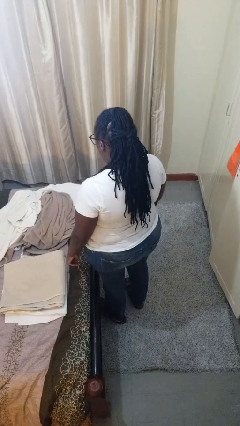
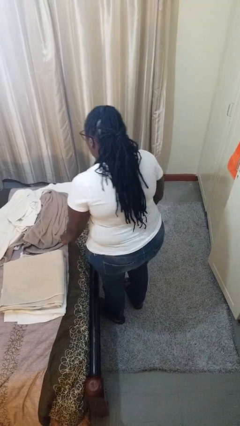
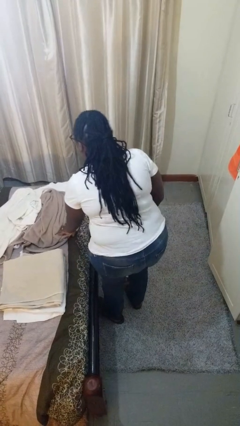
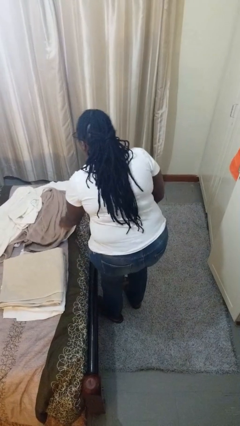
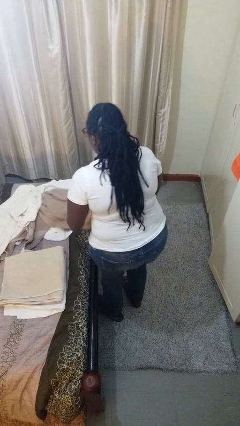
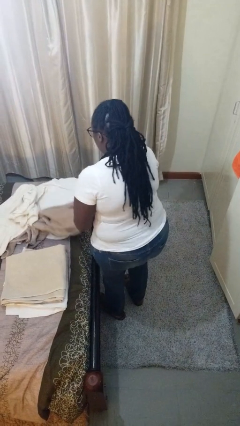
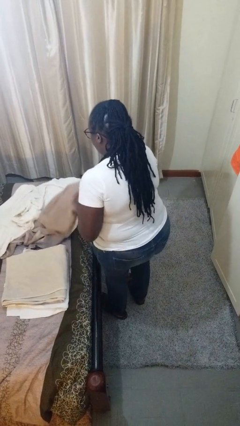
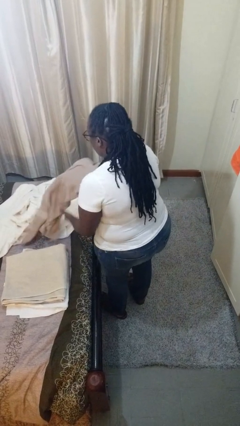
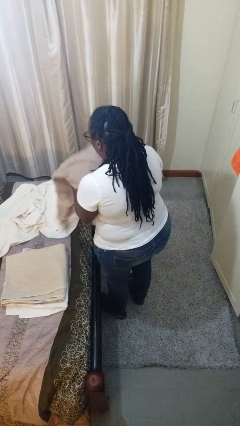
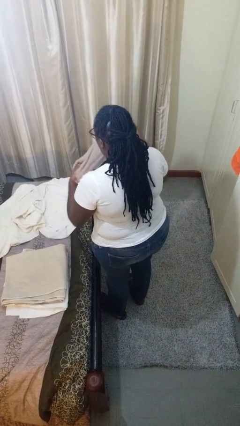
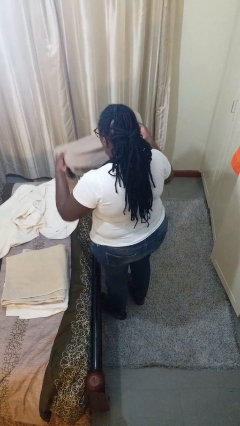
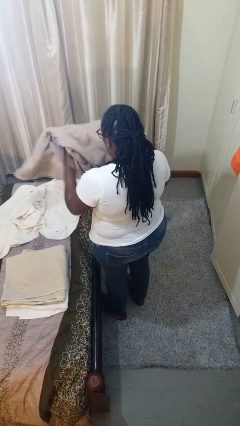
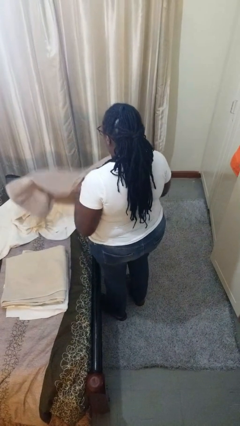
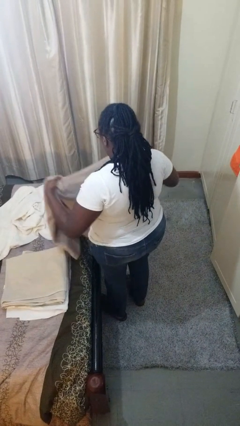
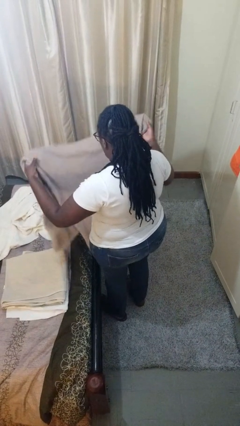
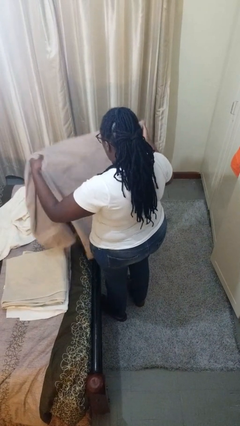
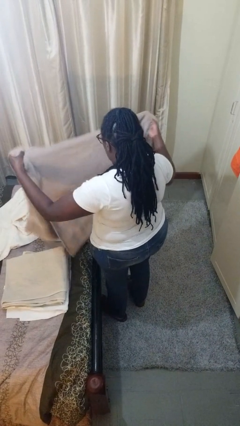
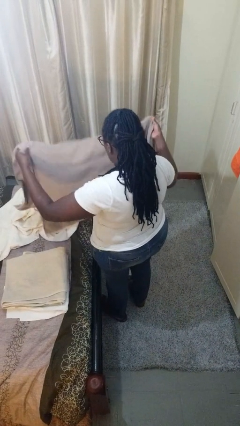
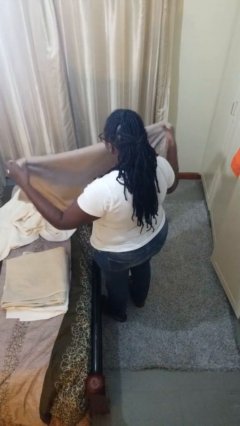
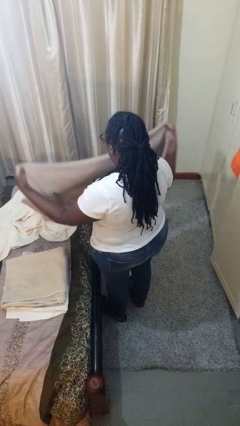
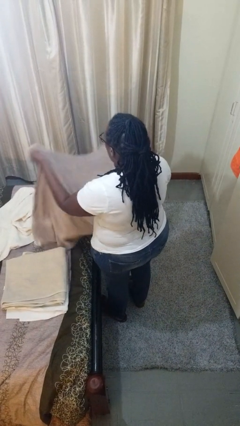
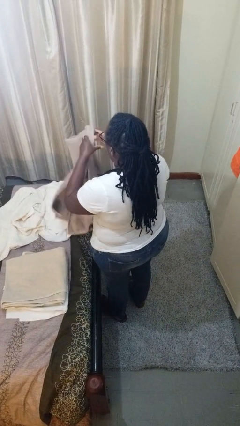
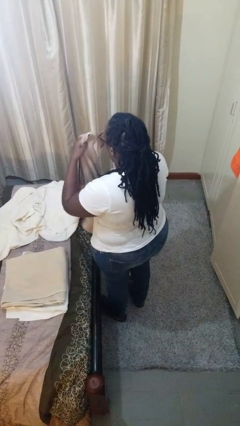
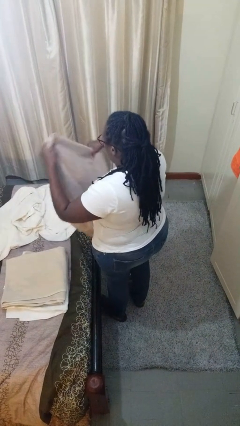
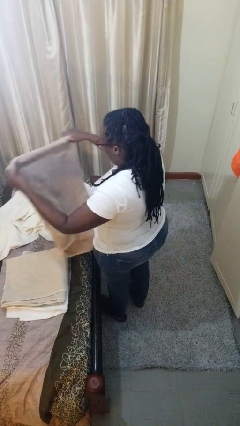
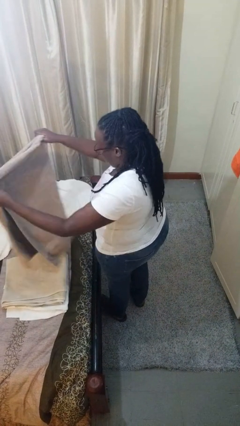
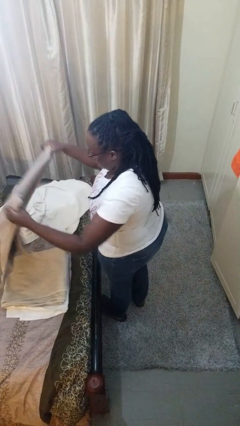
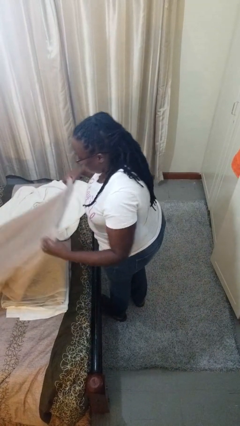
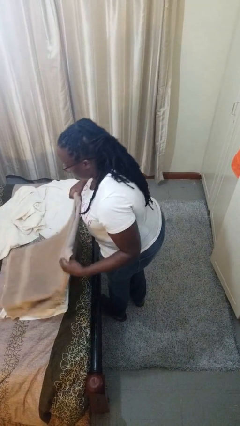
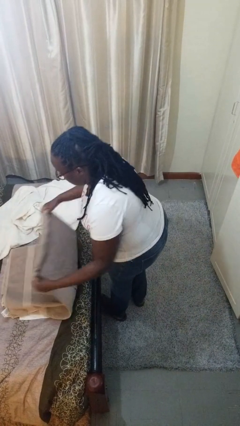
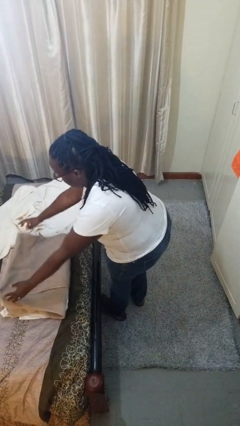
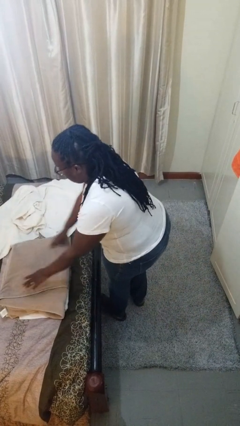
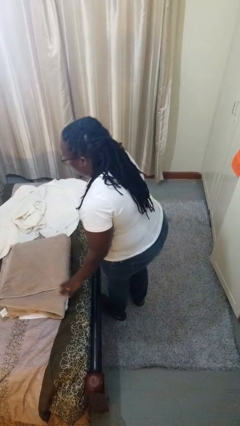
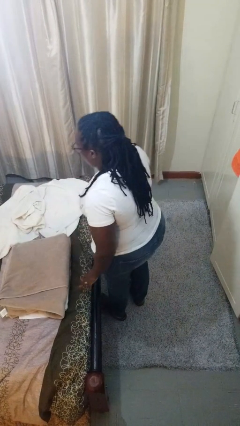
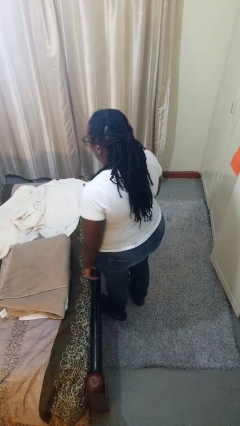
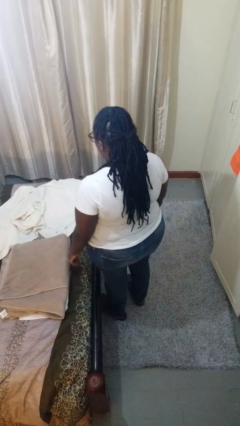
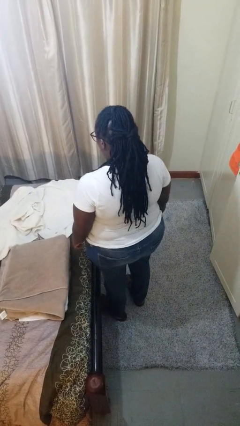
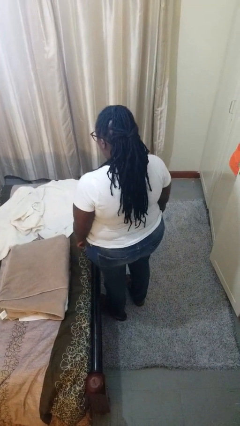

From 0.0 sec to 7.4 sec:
person folds towel

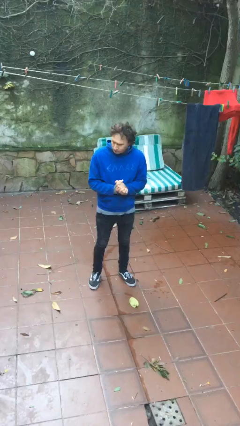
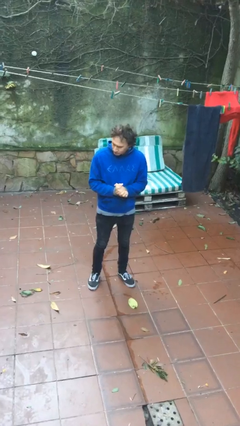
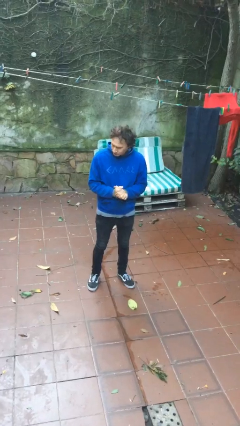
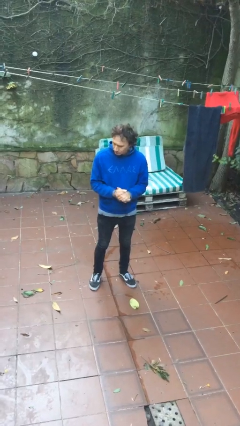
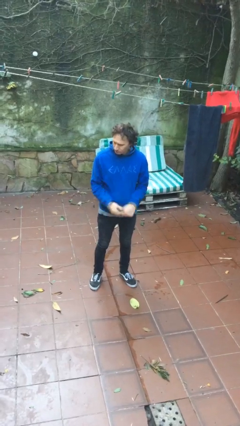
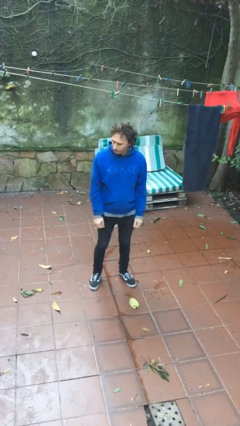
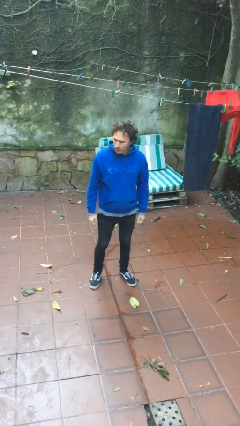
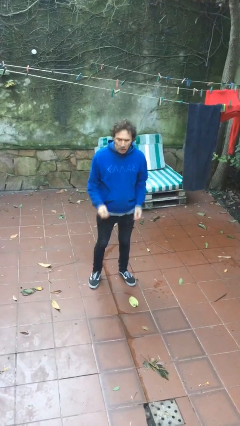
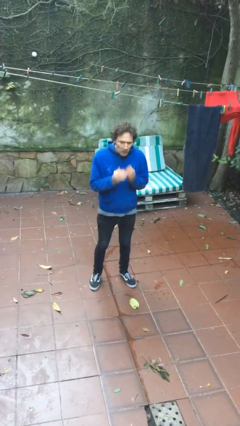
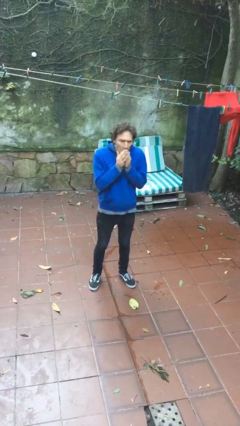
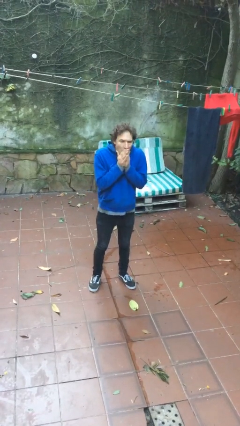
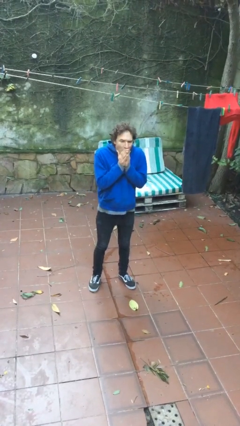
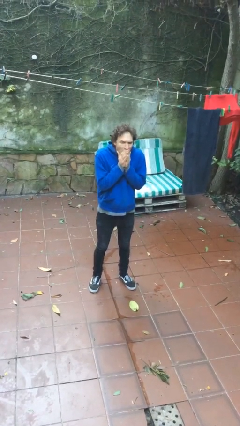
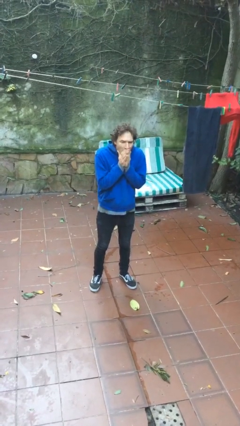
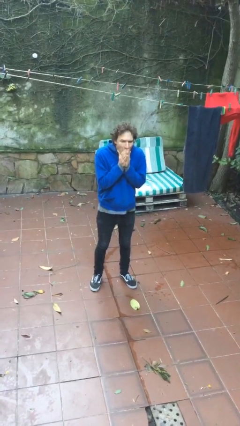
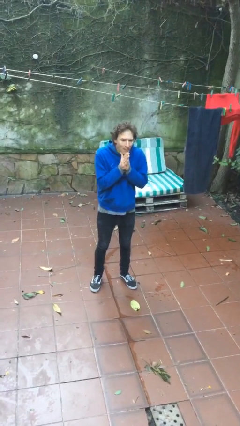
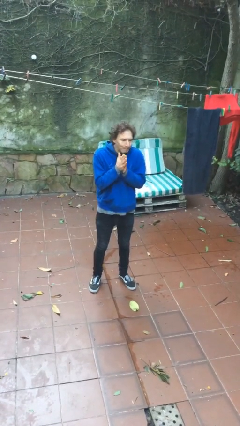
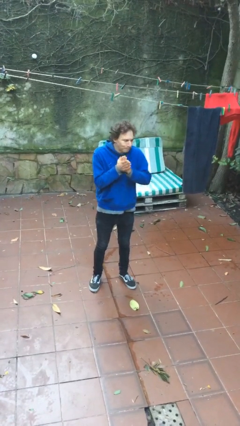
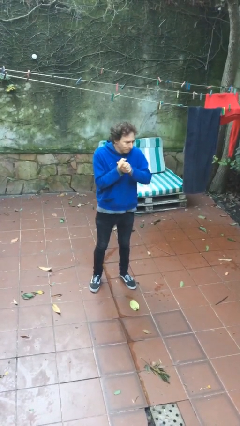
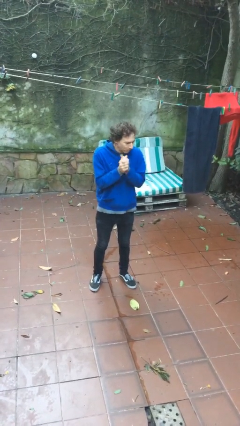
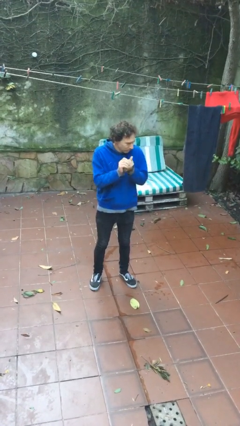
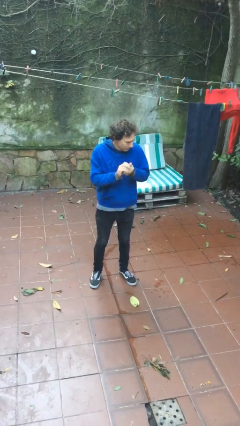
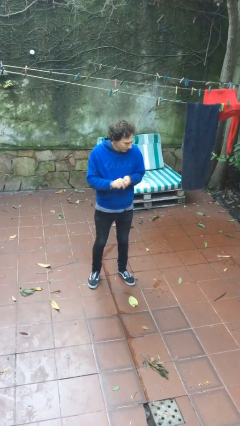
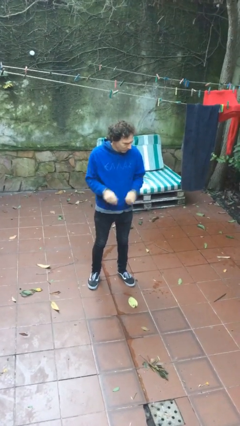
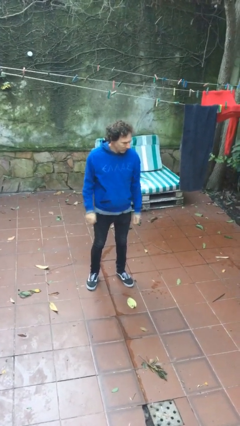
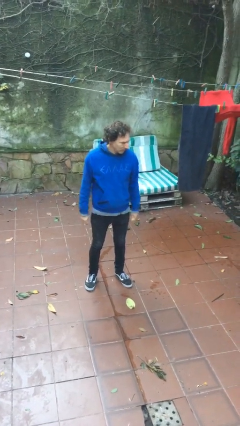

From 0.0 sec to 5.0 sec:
person blows into hands

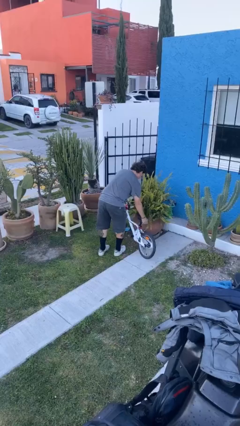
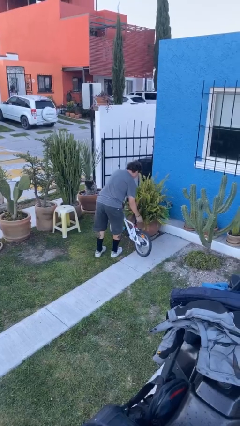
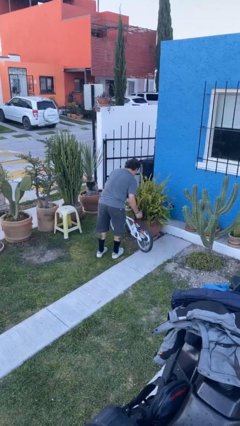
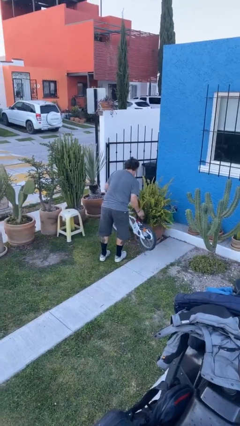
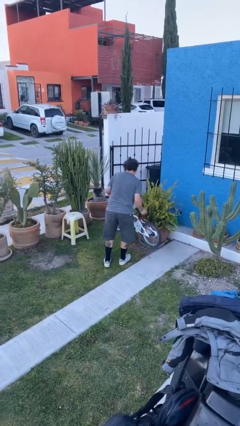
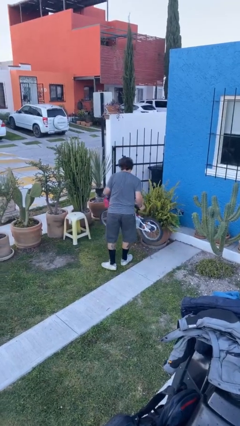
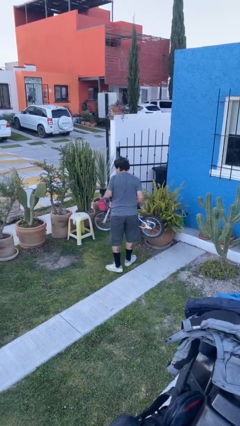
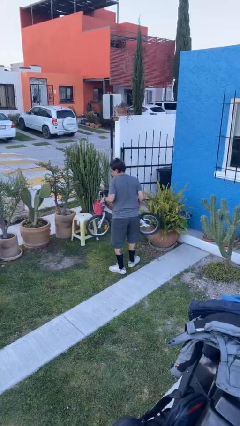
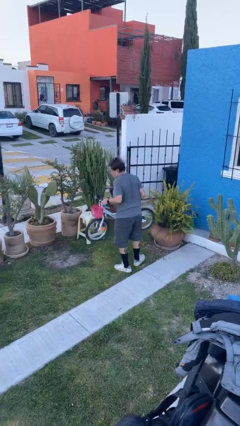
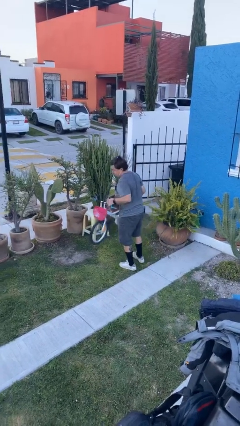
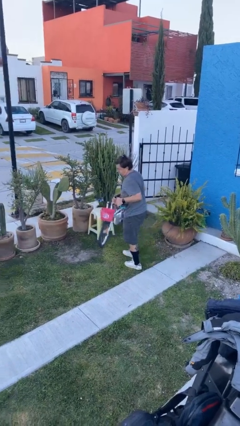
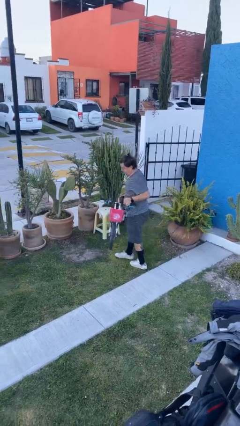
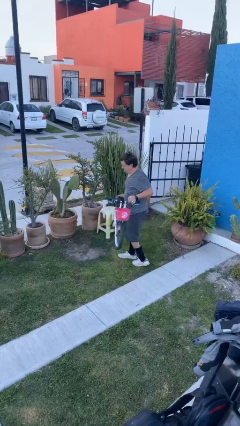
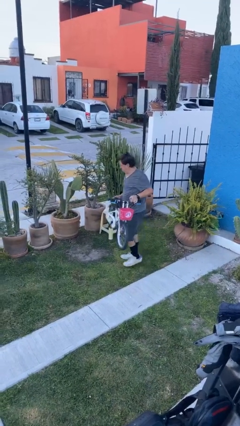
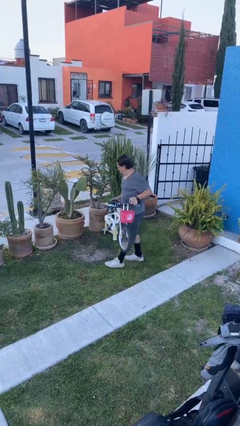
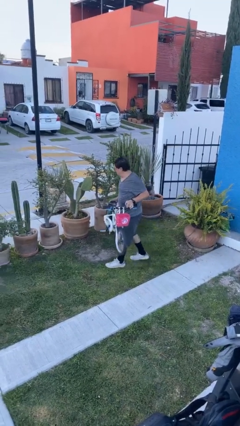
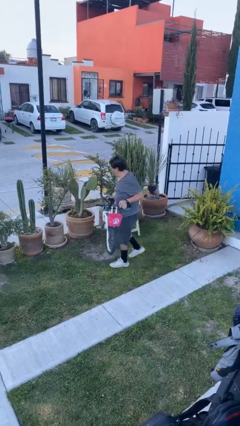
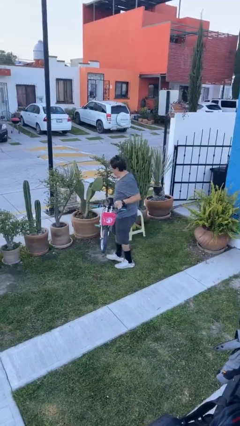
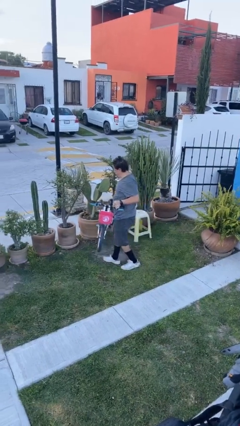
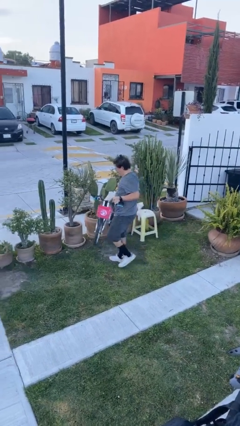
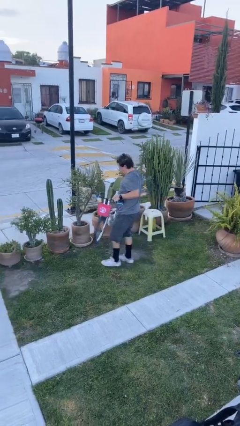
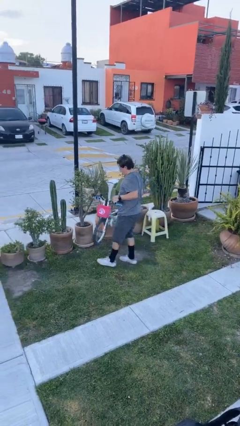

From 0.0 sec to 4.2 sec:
person carries heavy object

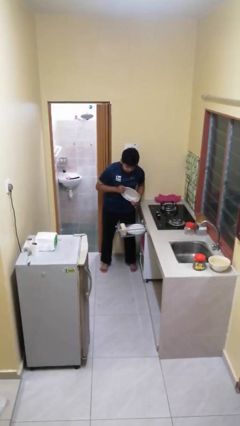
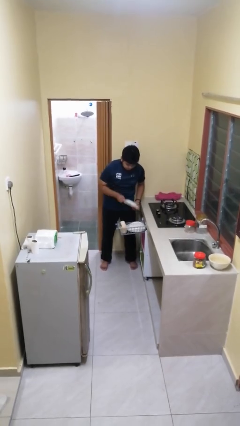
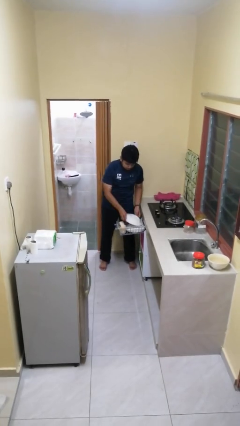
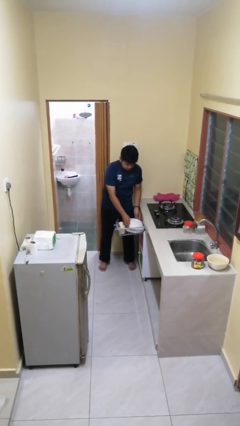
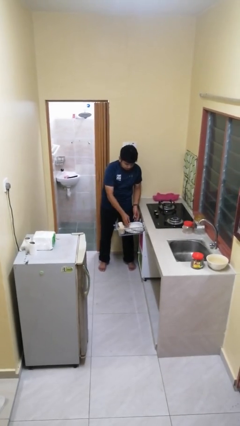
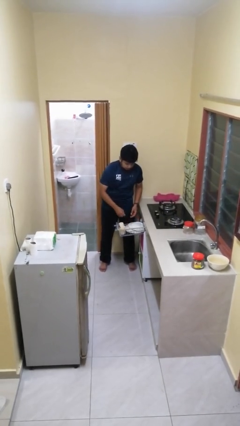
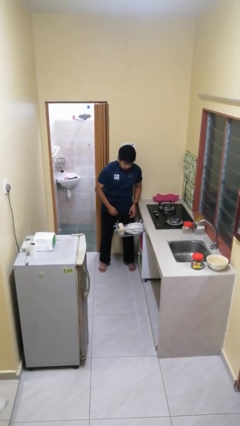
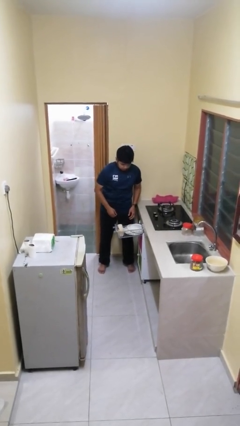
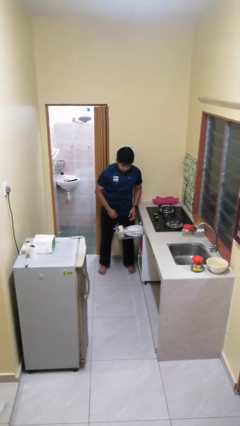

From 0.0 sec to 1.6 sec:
person puts object into kitchen drawer
